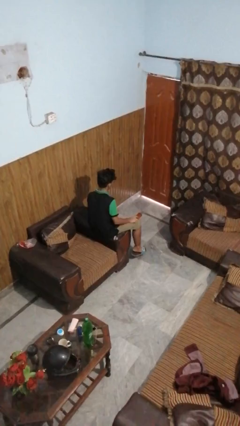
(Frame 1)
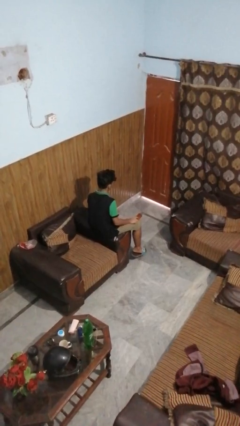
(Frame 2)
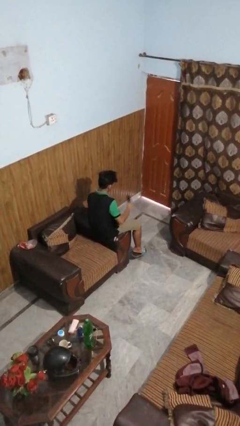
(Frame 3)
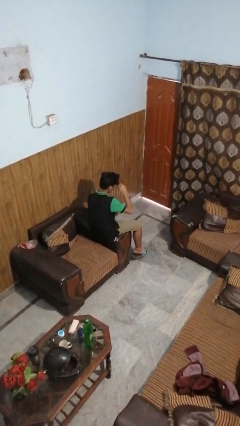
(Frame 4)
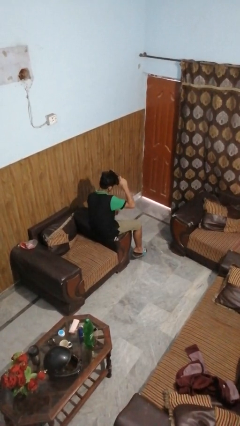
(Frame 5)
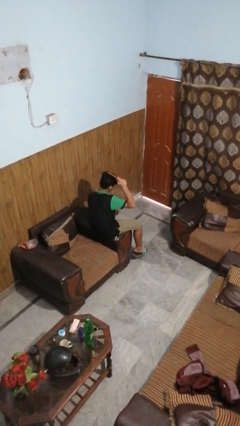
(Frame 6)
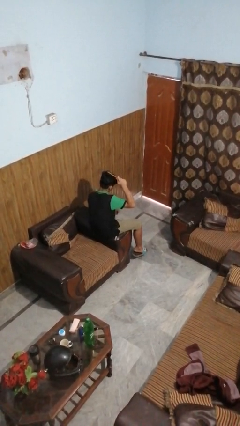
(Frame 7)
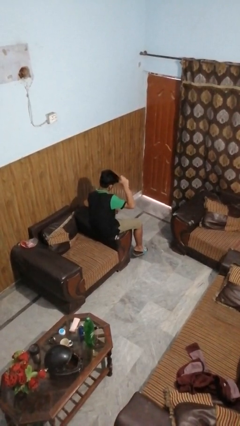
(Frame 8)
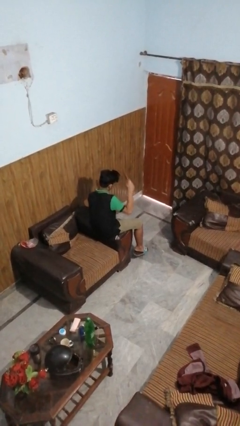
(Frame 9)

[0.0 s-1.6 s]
person brushes hair

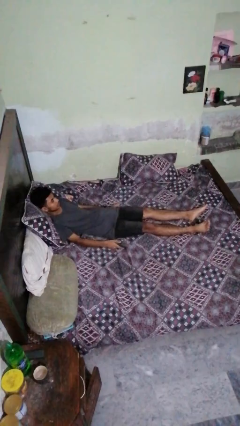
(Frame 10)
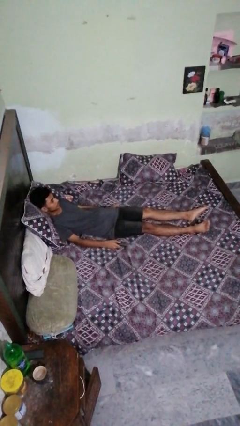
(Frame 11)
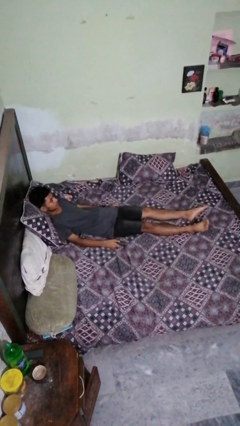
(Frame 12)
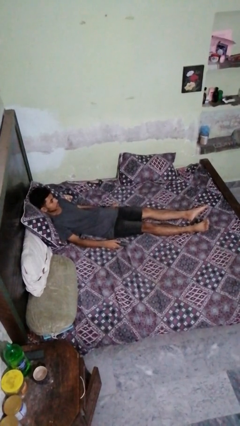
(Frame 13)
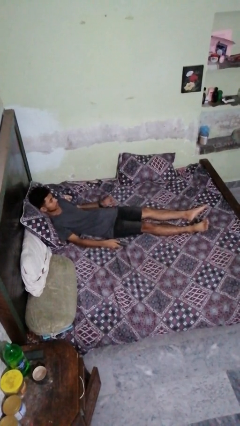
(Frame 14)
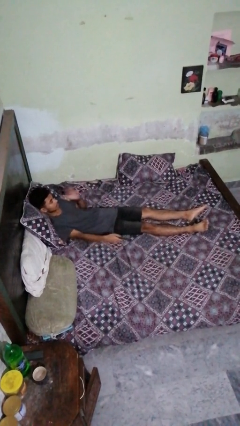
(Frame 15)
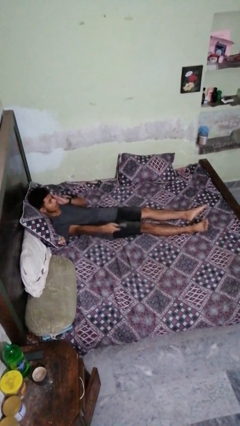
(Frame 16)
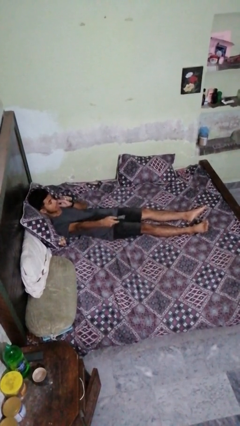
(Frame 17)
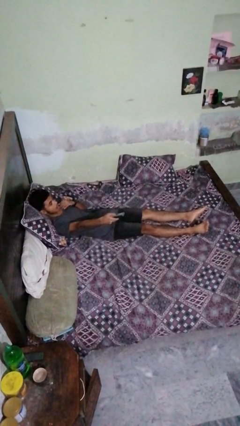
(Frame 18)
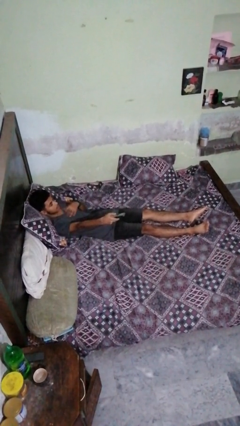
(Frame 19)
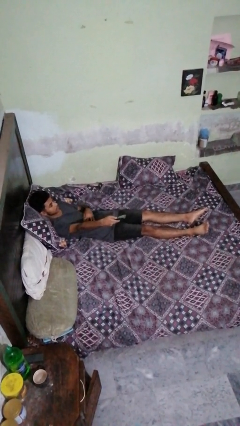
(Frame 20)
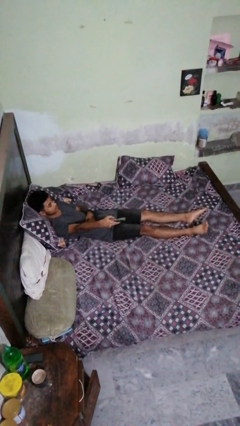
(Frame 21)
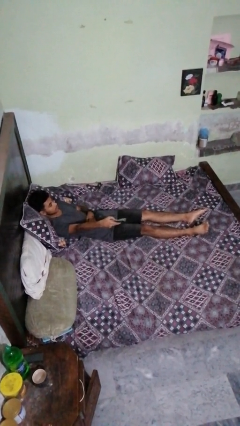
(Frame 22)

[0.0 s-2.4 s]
person uses television remote

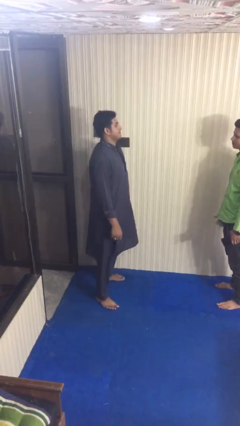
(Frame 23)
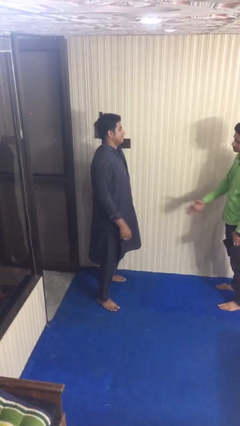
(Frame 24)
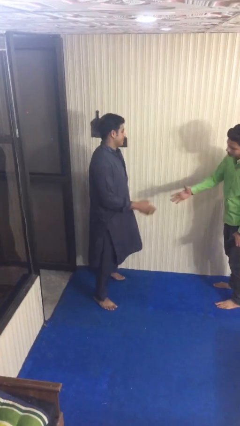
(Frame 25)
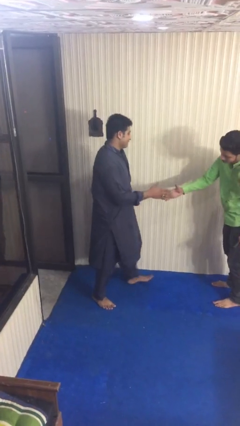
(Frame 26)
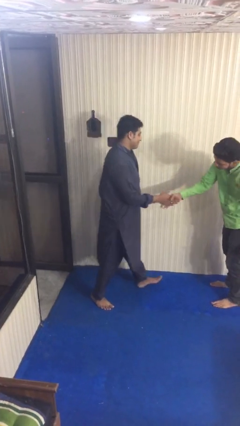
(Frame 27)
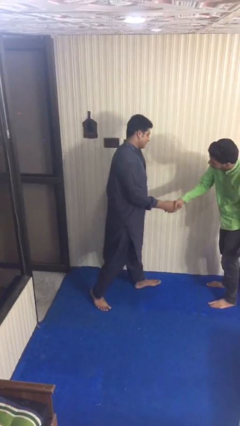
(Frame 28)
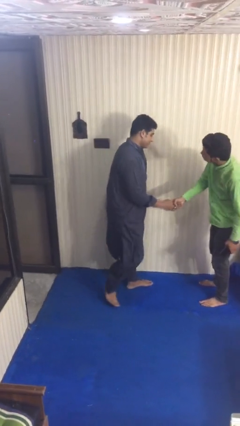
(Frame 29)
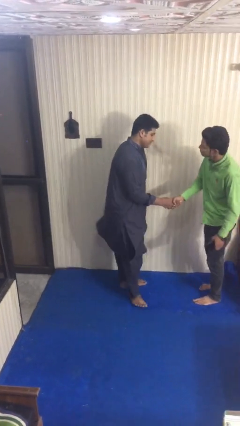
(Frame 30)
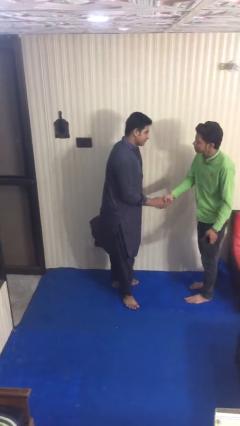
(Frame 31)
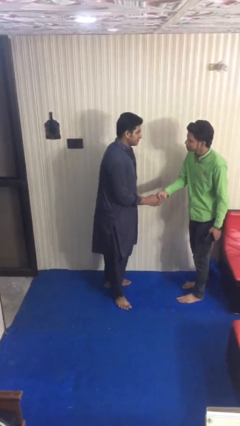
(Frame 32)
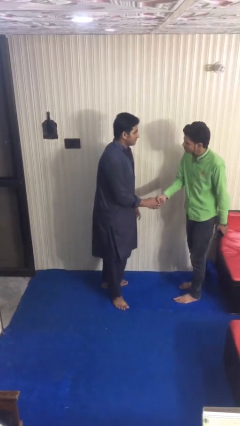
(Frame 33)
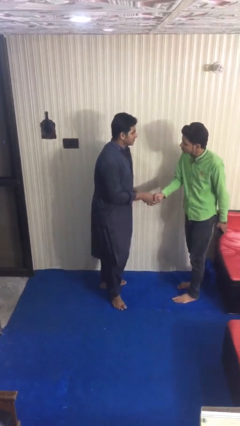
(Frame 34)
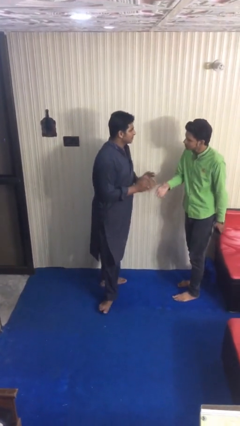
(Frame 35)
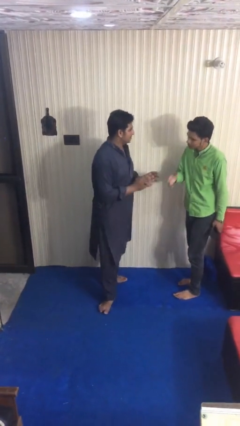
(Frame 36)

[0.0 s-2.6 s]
person shakes hand

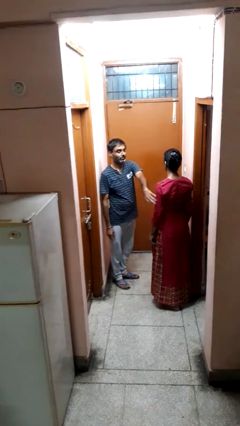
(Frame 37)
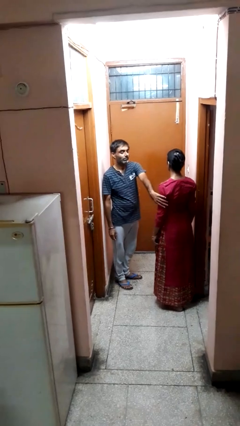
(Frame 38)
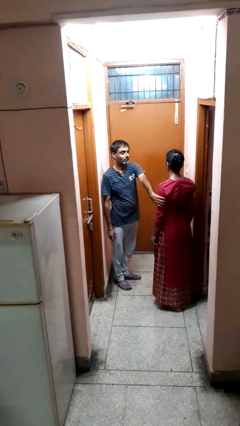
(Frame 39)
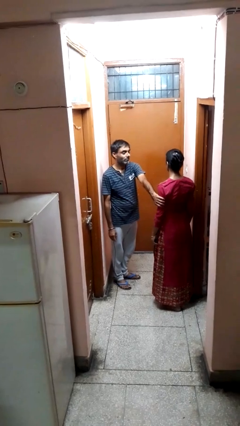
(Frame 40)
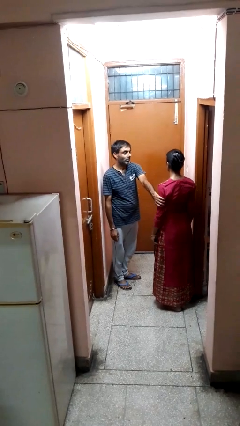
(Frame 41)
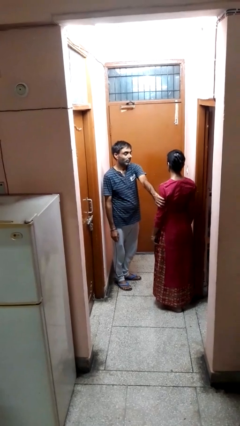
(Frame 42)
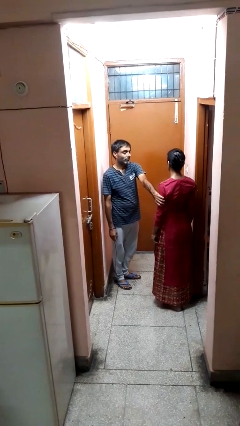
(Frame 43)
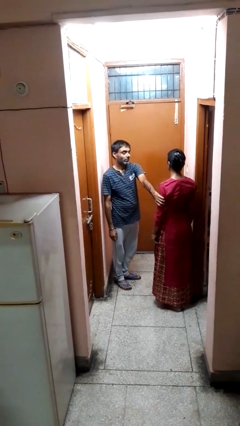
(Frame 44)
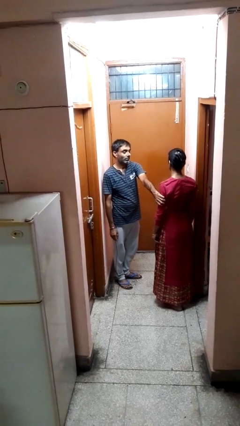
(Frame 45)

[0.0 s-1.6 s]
person grabs person by bicep

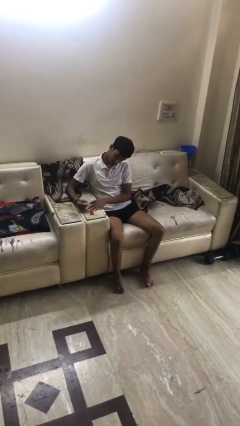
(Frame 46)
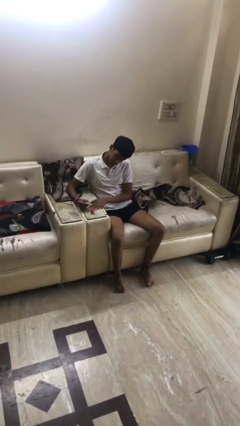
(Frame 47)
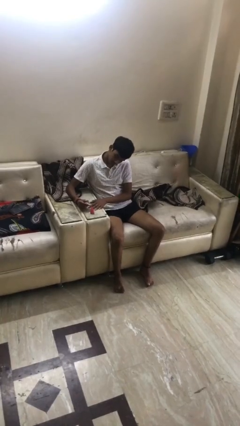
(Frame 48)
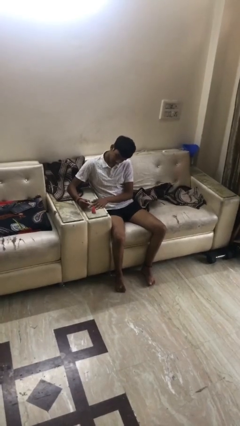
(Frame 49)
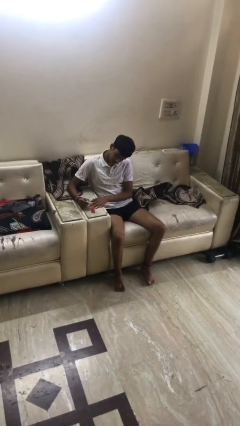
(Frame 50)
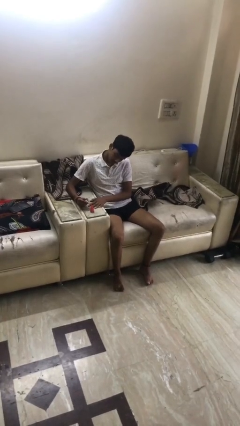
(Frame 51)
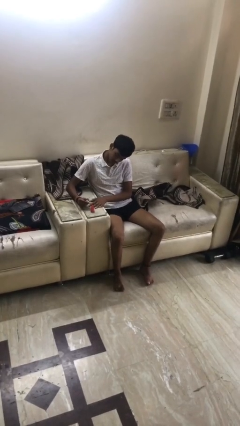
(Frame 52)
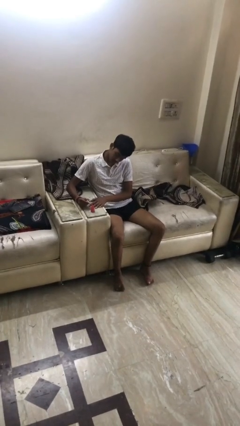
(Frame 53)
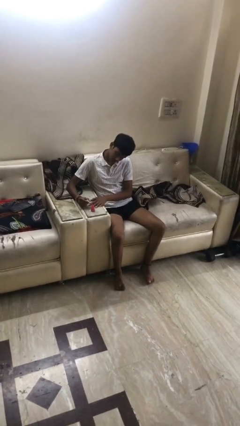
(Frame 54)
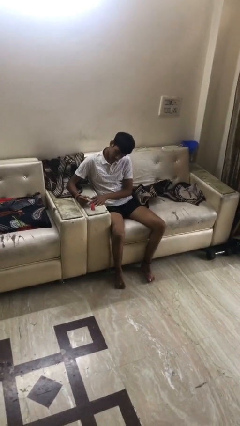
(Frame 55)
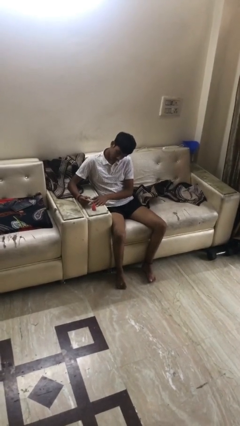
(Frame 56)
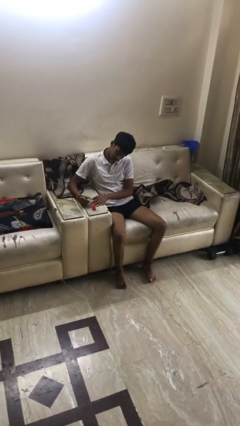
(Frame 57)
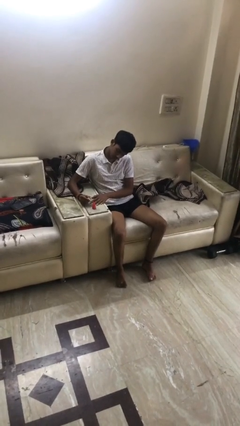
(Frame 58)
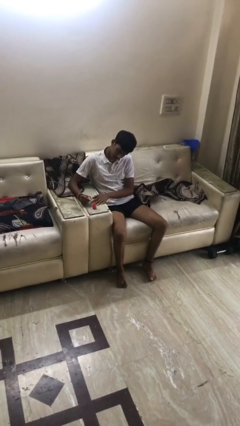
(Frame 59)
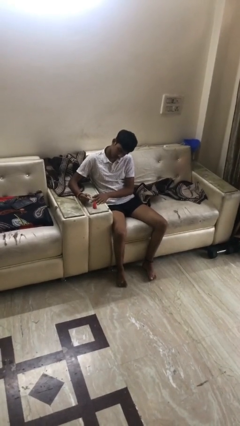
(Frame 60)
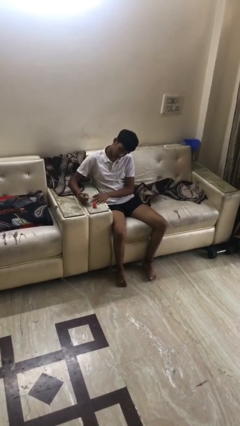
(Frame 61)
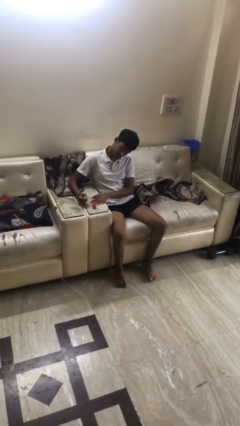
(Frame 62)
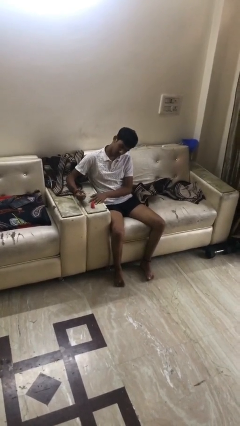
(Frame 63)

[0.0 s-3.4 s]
person paints fingernails

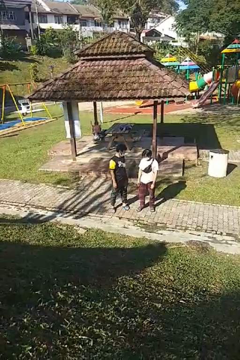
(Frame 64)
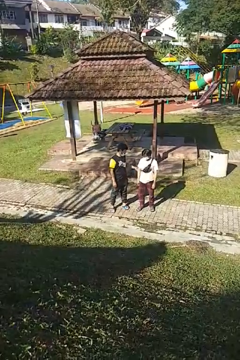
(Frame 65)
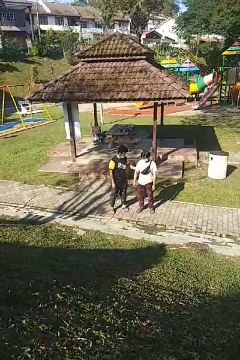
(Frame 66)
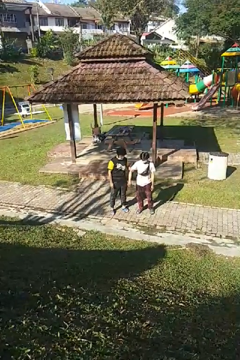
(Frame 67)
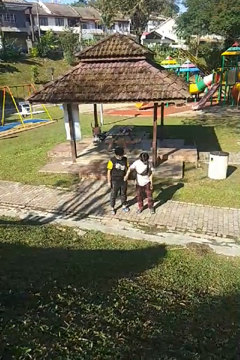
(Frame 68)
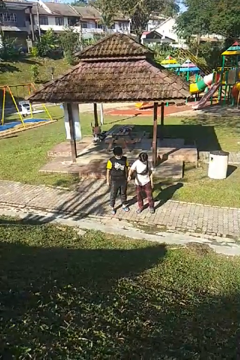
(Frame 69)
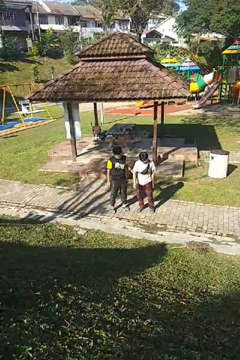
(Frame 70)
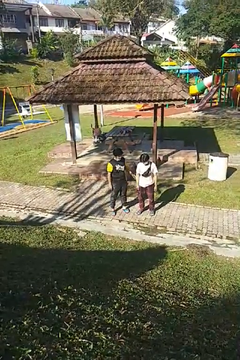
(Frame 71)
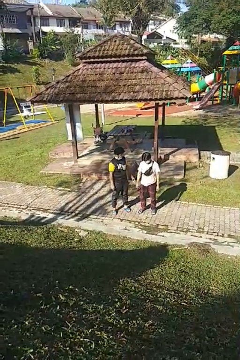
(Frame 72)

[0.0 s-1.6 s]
person grabs person by hair

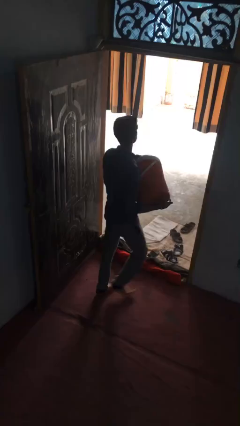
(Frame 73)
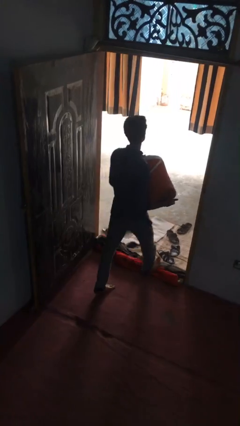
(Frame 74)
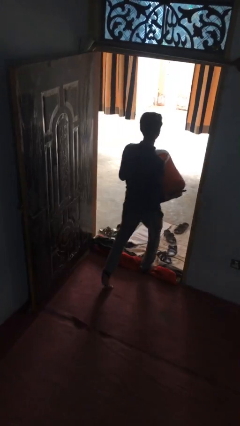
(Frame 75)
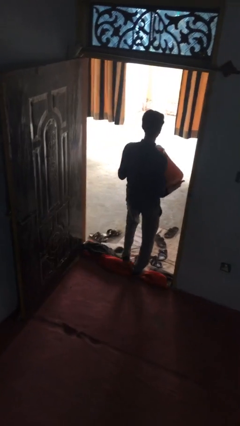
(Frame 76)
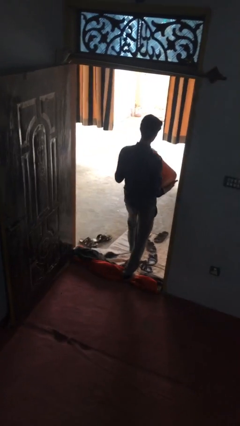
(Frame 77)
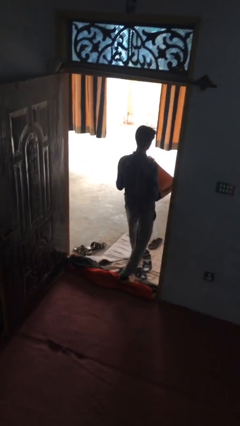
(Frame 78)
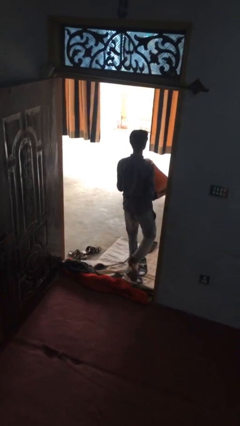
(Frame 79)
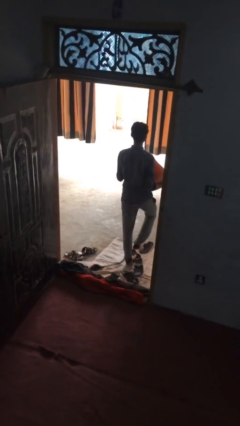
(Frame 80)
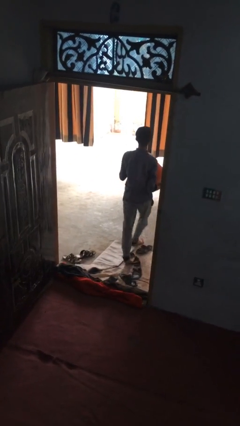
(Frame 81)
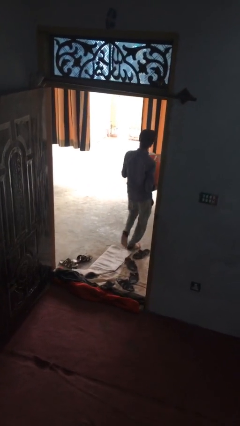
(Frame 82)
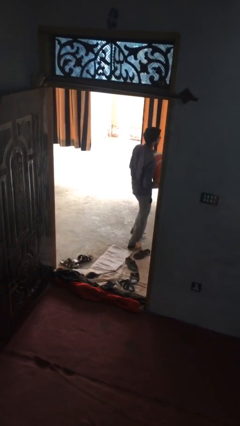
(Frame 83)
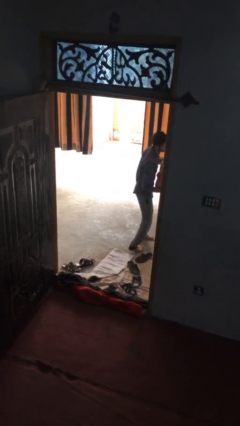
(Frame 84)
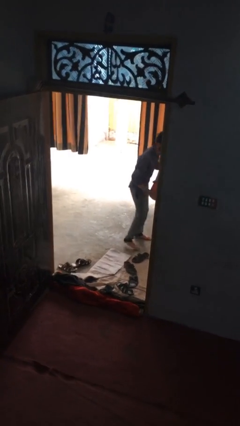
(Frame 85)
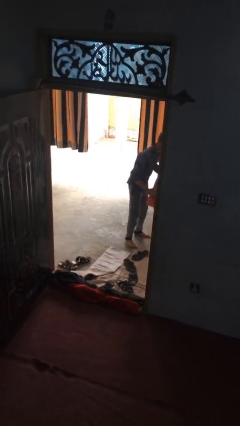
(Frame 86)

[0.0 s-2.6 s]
person carries heavy object

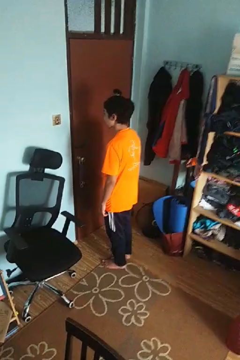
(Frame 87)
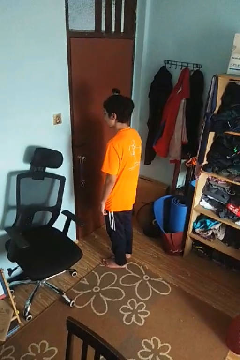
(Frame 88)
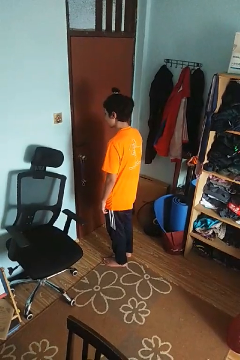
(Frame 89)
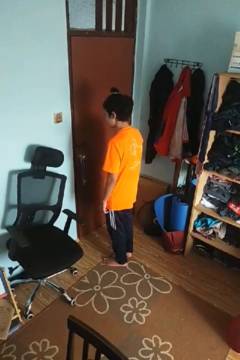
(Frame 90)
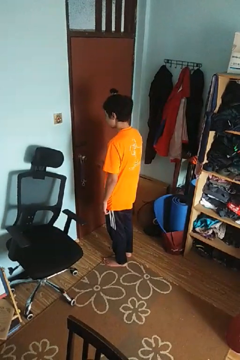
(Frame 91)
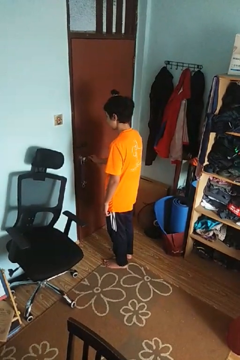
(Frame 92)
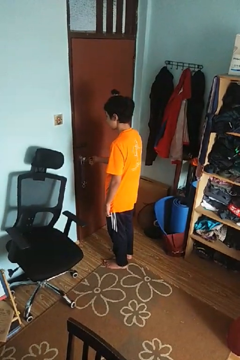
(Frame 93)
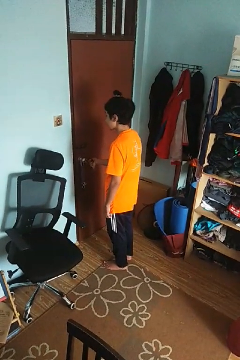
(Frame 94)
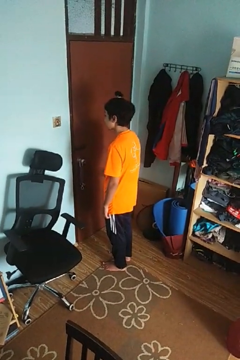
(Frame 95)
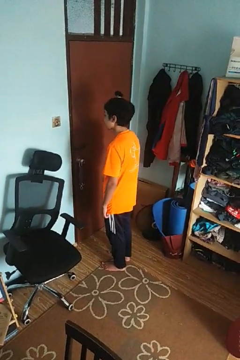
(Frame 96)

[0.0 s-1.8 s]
person unlocks door with keys

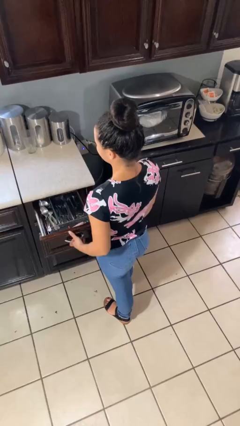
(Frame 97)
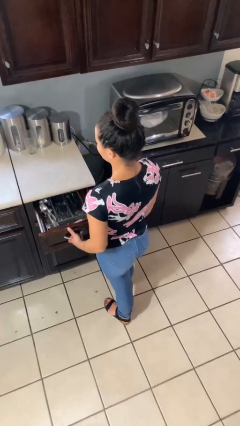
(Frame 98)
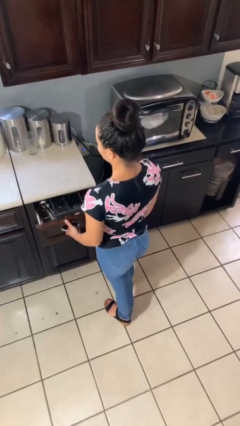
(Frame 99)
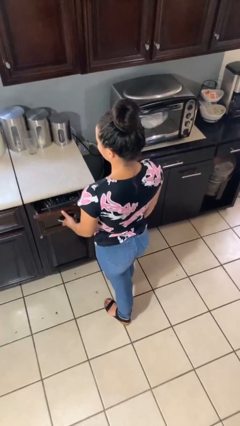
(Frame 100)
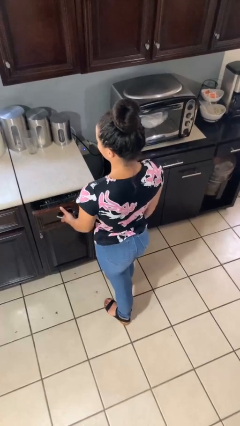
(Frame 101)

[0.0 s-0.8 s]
person closes kitchen drawer
